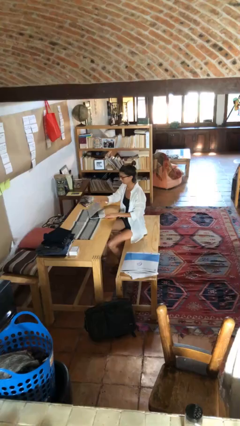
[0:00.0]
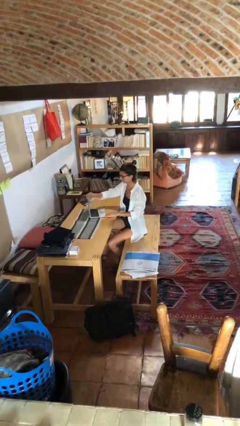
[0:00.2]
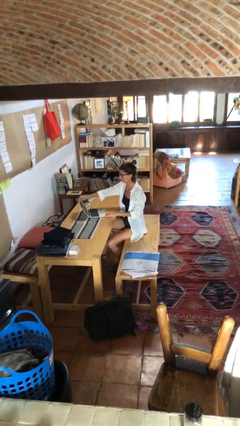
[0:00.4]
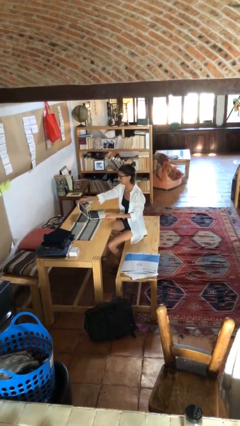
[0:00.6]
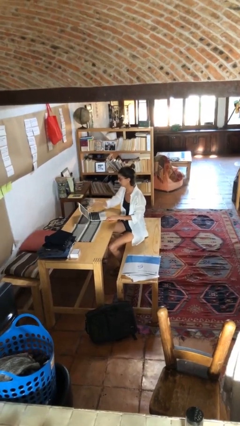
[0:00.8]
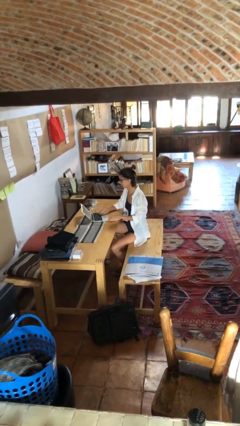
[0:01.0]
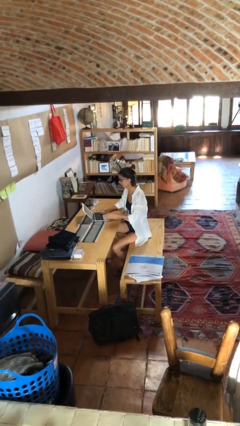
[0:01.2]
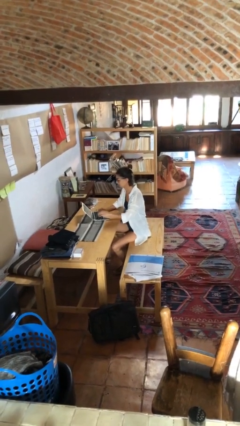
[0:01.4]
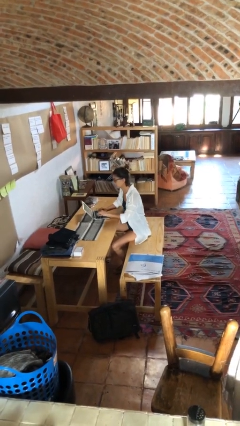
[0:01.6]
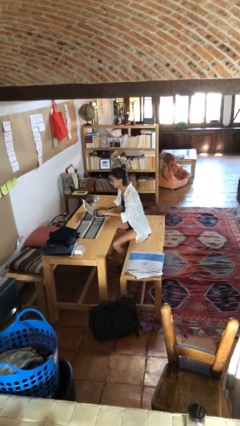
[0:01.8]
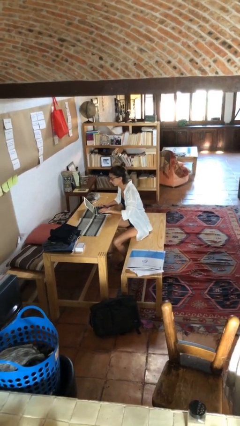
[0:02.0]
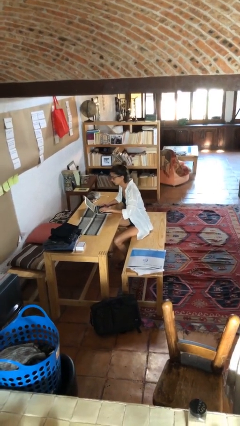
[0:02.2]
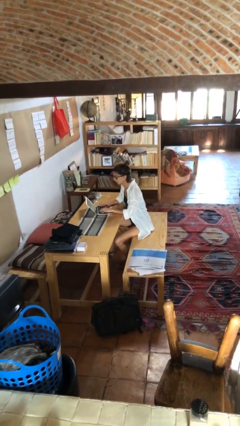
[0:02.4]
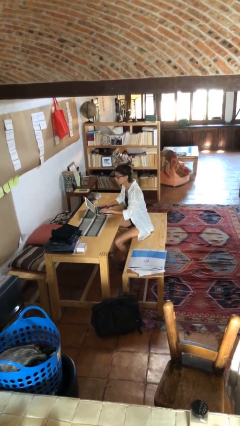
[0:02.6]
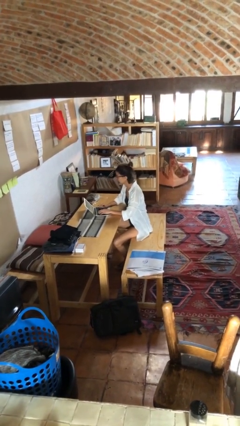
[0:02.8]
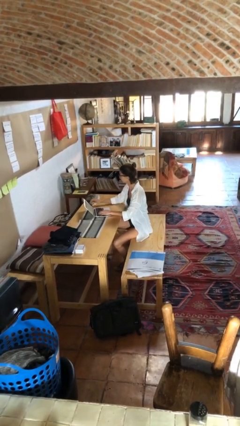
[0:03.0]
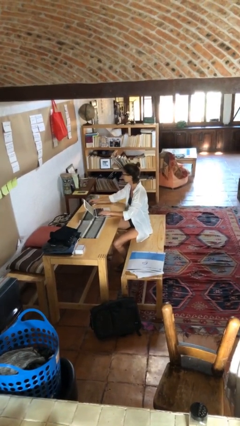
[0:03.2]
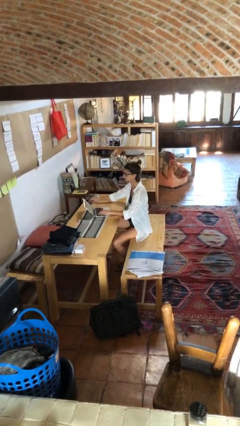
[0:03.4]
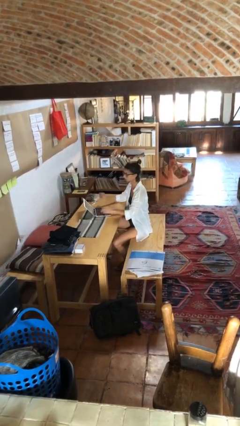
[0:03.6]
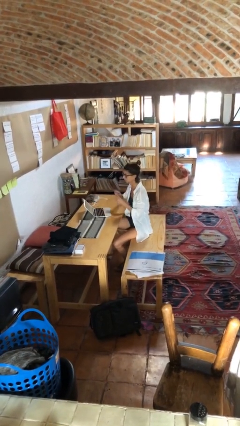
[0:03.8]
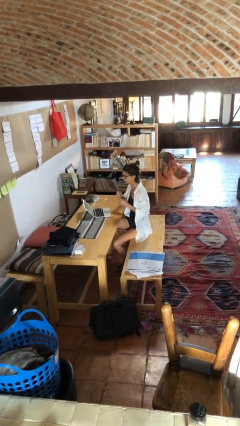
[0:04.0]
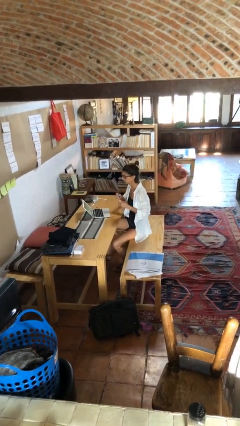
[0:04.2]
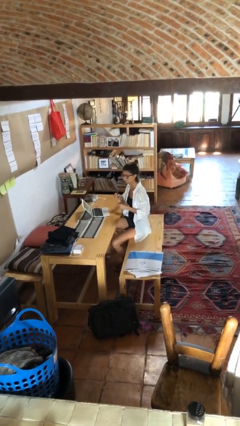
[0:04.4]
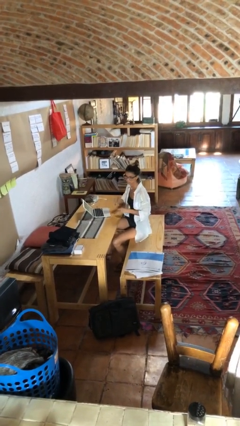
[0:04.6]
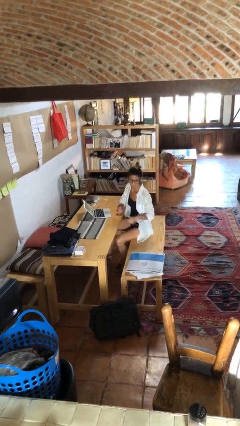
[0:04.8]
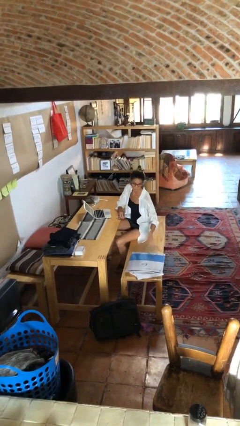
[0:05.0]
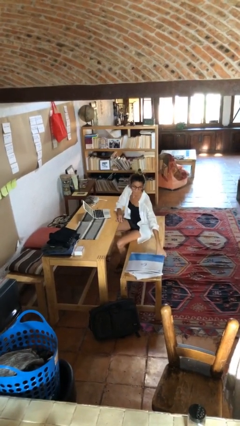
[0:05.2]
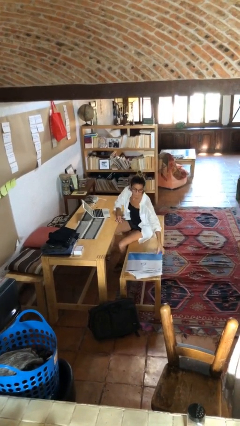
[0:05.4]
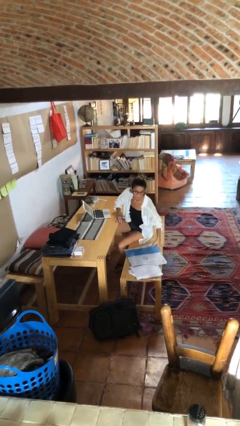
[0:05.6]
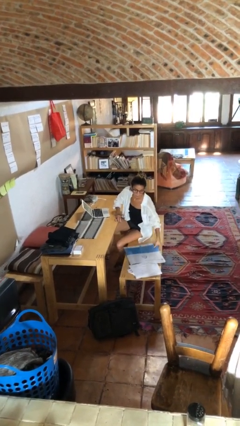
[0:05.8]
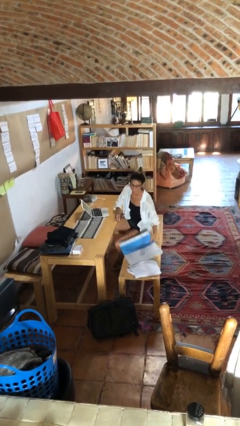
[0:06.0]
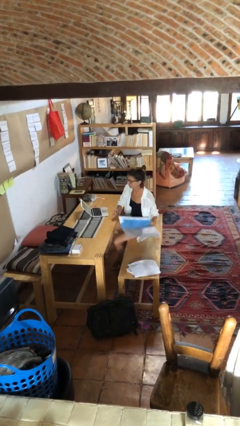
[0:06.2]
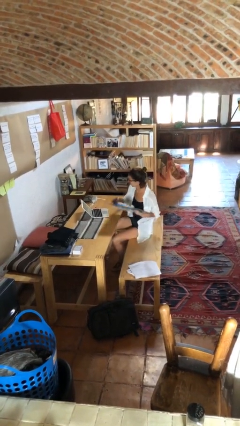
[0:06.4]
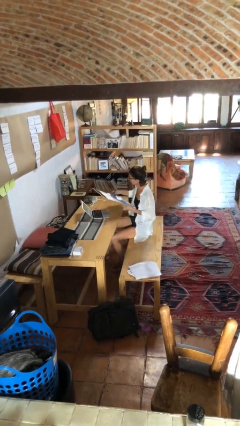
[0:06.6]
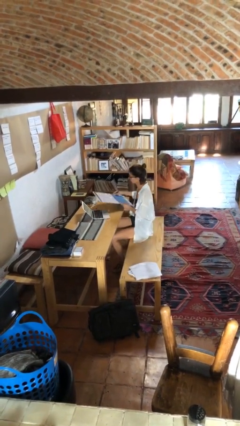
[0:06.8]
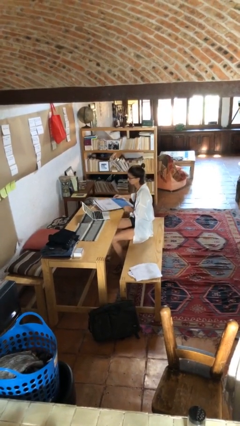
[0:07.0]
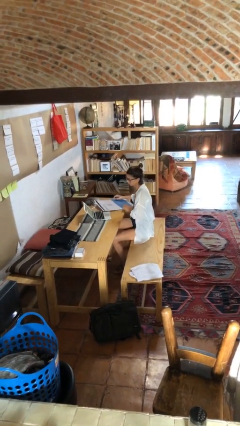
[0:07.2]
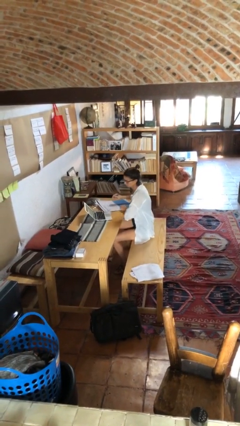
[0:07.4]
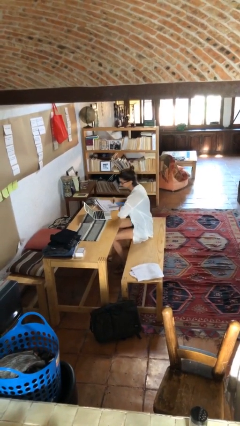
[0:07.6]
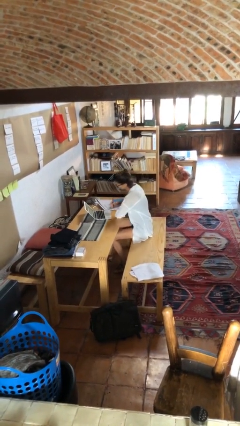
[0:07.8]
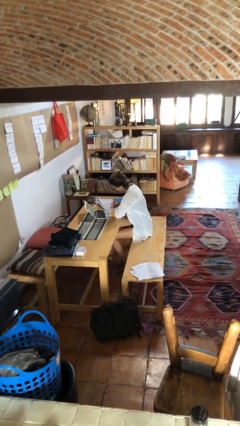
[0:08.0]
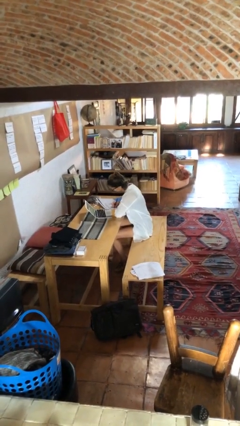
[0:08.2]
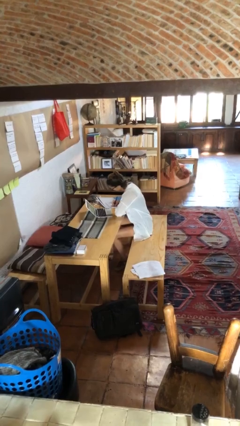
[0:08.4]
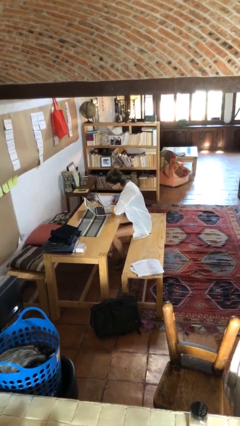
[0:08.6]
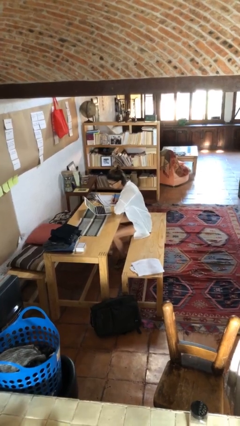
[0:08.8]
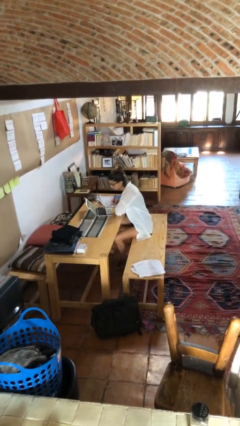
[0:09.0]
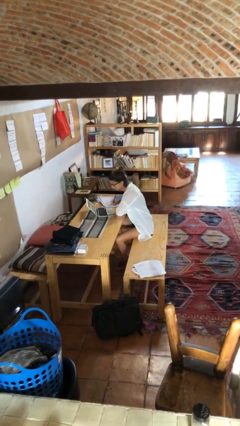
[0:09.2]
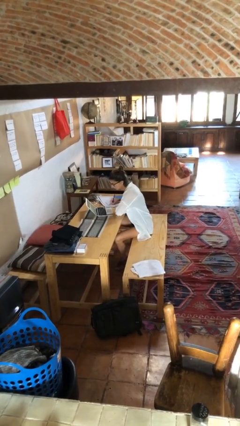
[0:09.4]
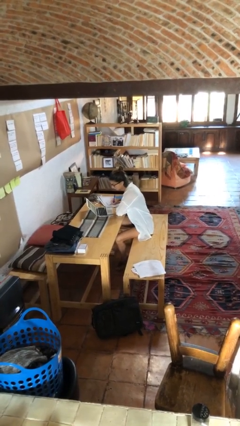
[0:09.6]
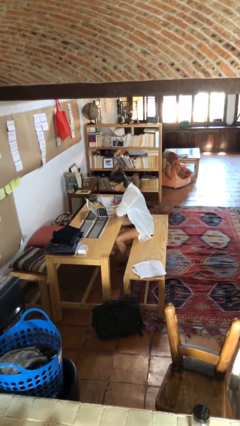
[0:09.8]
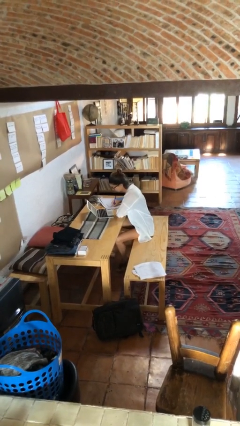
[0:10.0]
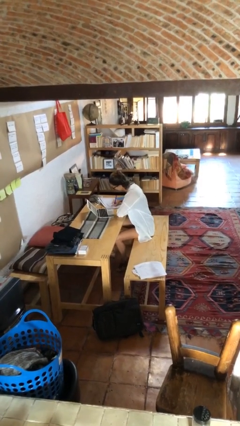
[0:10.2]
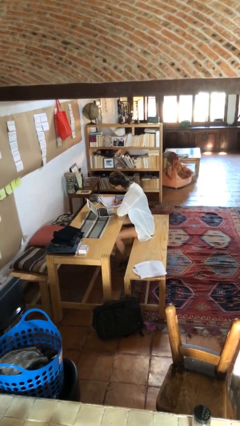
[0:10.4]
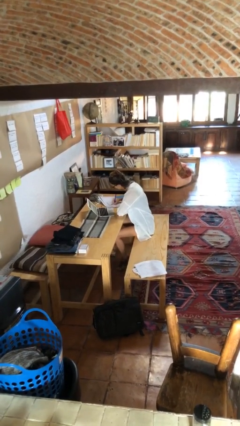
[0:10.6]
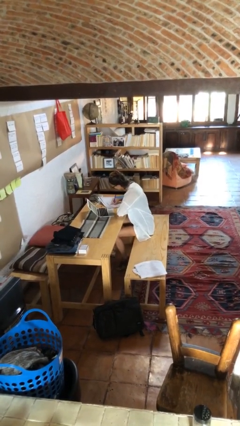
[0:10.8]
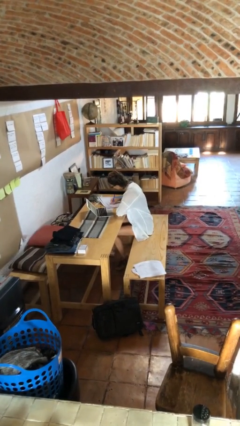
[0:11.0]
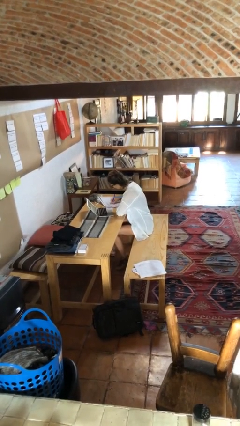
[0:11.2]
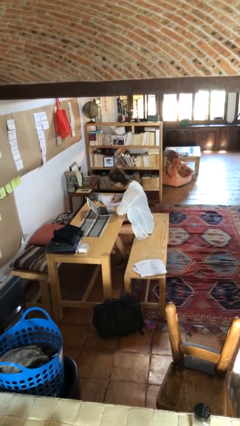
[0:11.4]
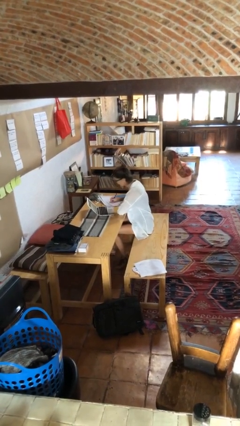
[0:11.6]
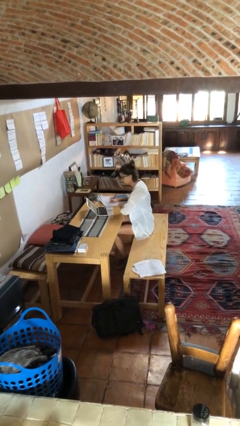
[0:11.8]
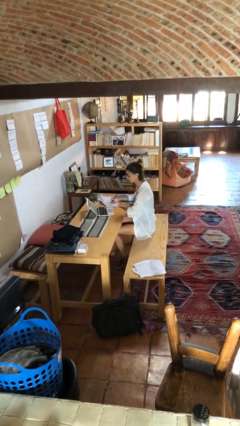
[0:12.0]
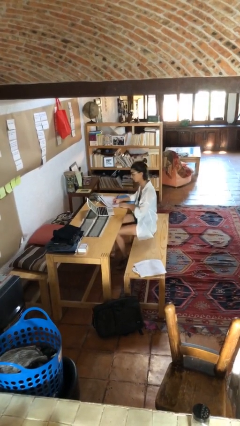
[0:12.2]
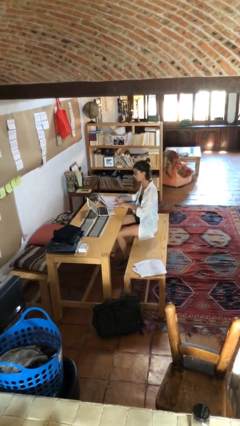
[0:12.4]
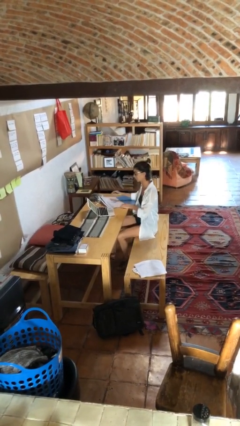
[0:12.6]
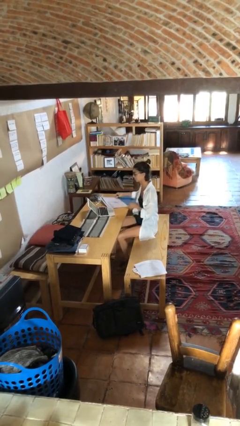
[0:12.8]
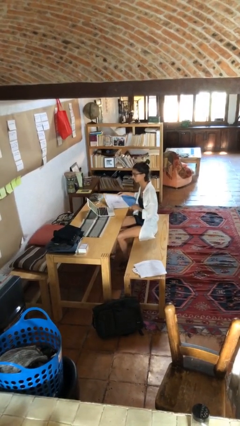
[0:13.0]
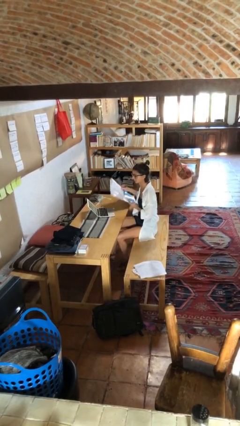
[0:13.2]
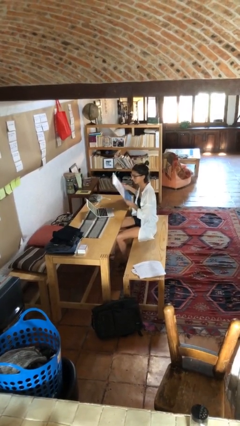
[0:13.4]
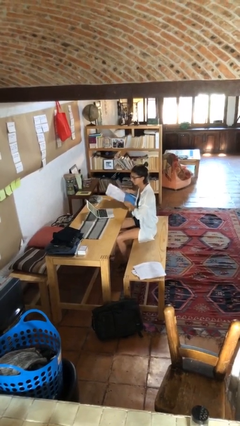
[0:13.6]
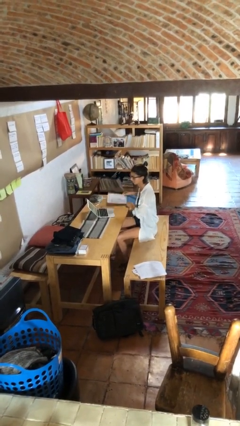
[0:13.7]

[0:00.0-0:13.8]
person interacts with laptop

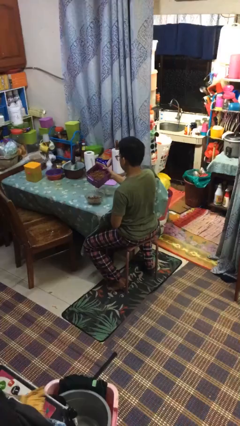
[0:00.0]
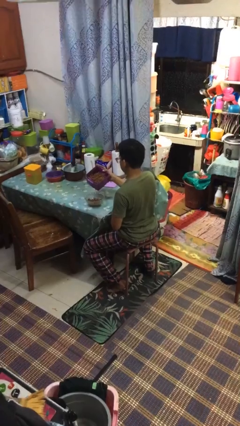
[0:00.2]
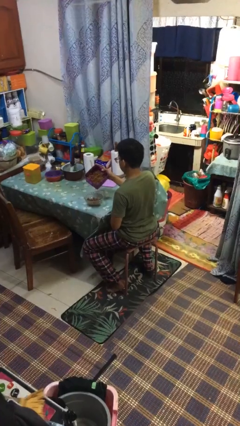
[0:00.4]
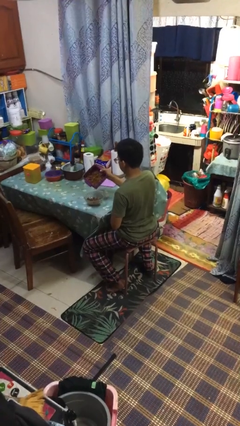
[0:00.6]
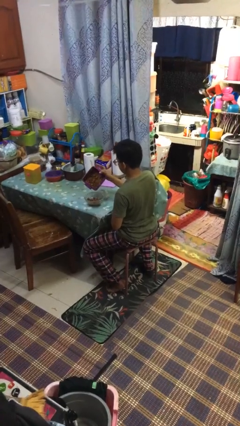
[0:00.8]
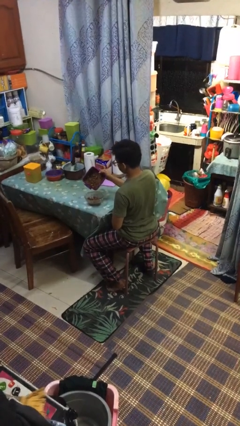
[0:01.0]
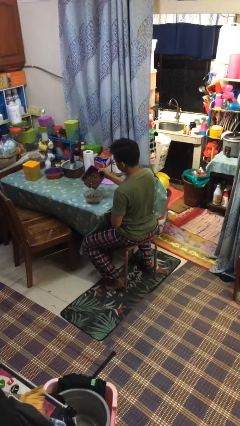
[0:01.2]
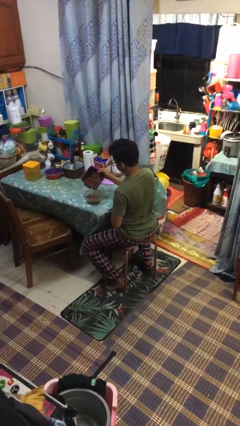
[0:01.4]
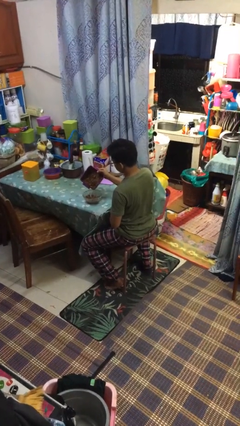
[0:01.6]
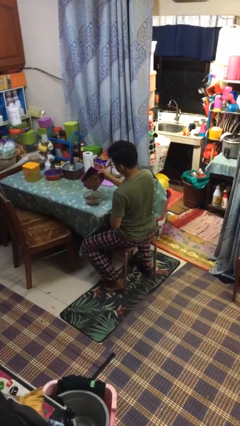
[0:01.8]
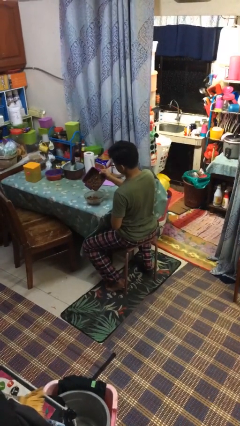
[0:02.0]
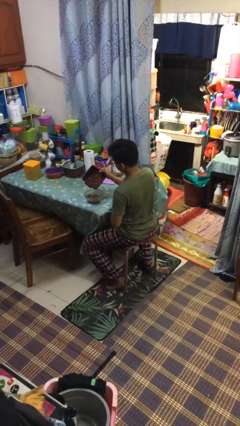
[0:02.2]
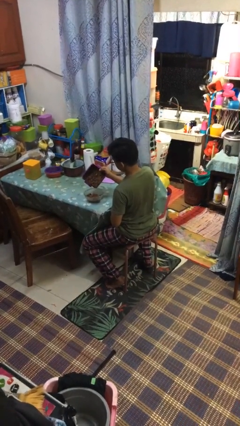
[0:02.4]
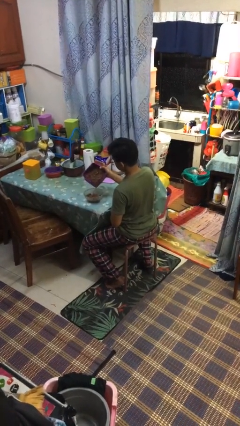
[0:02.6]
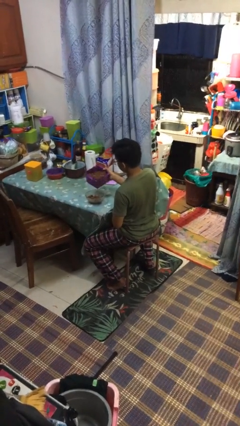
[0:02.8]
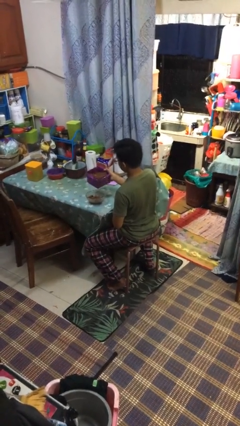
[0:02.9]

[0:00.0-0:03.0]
person pours into bowl

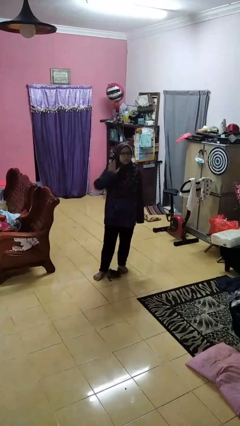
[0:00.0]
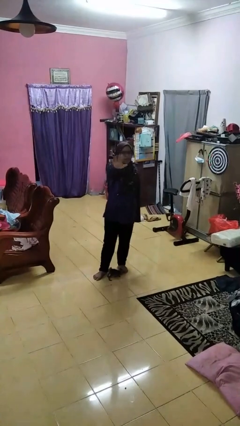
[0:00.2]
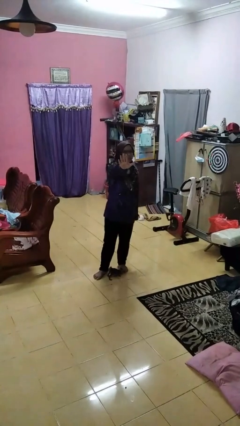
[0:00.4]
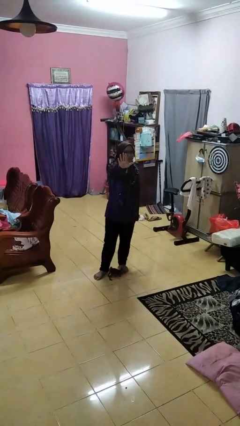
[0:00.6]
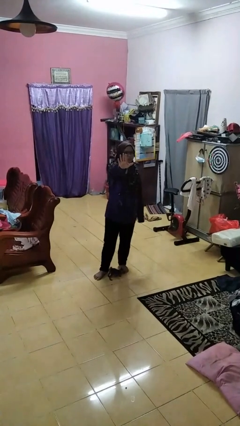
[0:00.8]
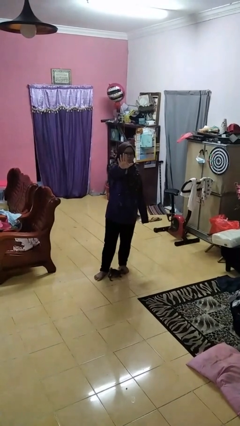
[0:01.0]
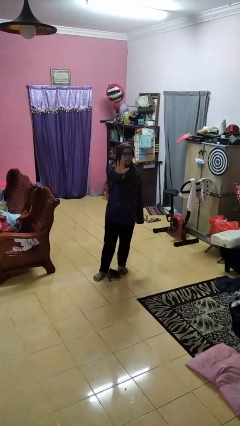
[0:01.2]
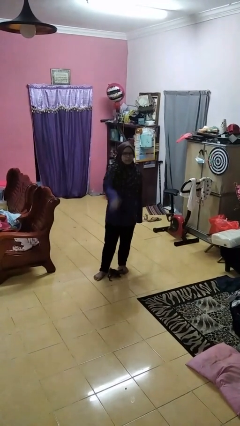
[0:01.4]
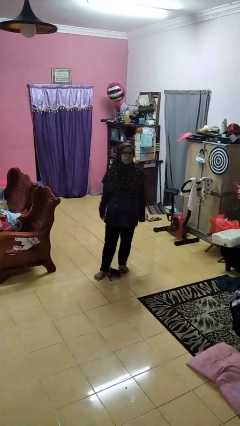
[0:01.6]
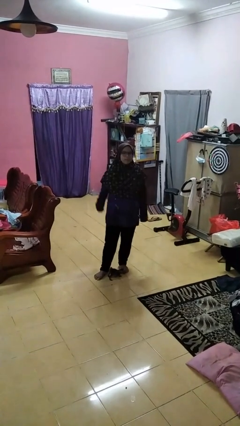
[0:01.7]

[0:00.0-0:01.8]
person gestures stop
